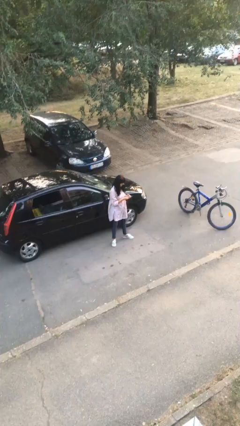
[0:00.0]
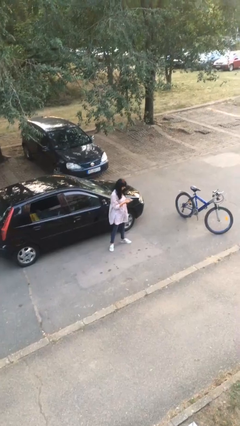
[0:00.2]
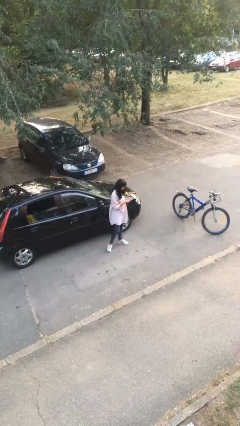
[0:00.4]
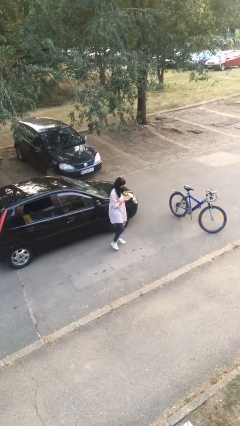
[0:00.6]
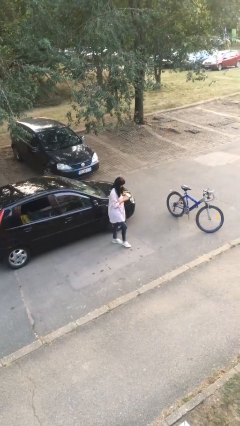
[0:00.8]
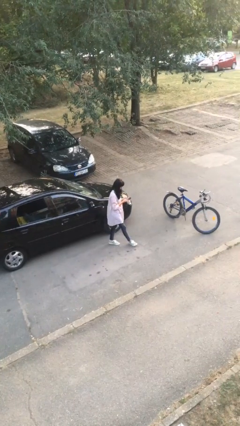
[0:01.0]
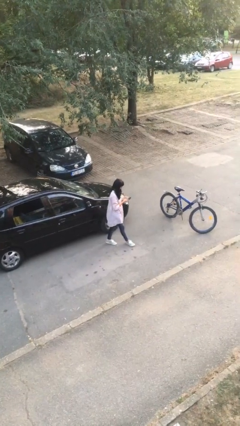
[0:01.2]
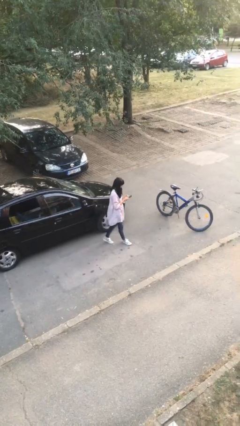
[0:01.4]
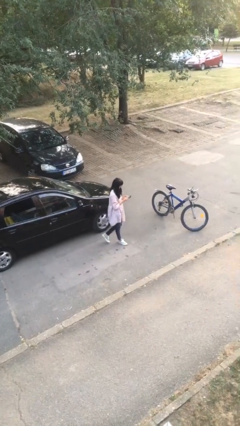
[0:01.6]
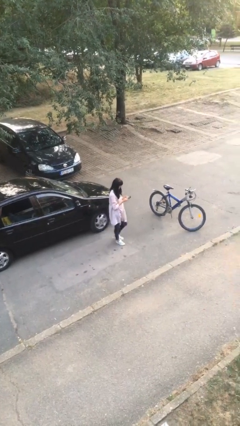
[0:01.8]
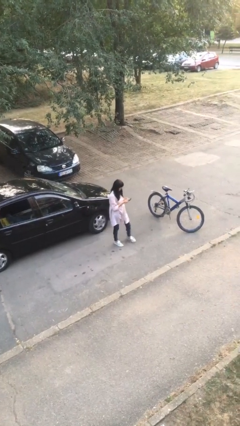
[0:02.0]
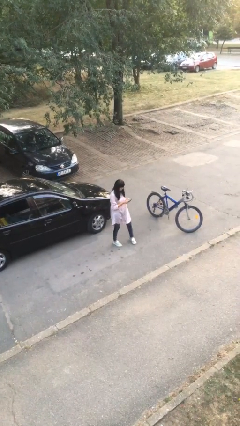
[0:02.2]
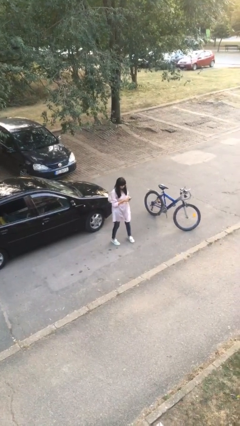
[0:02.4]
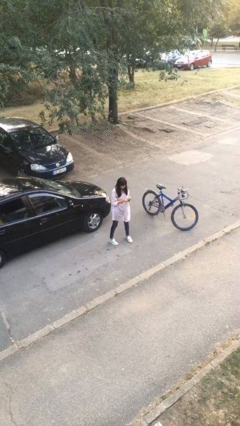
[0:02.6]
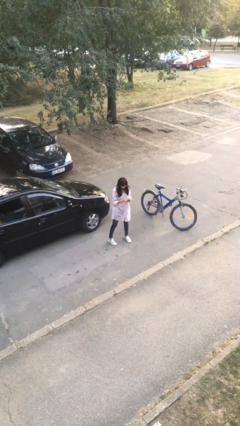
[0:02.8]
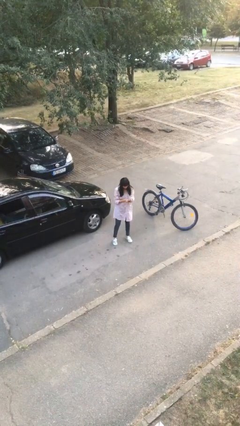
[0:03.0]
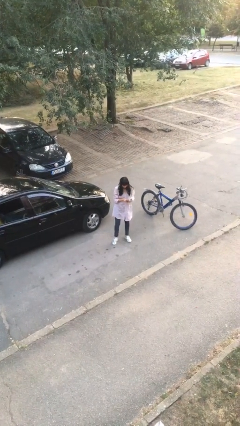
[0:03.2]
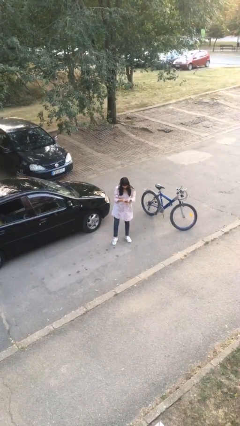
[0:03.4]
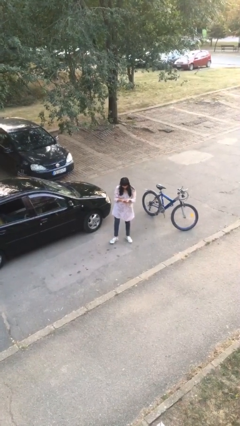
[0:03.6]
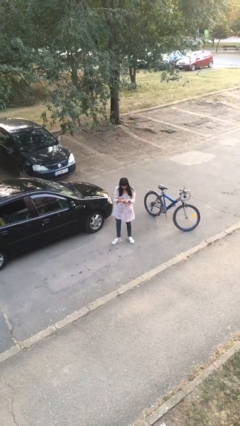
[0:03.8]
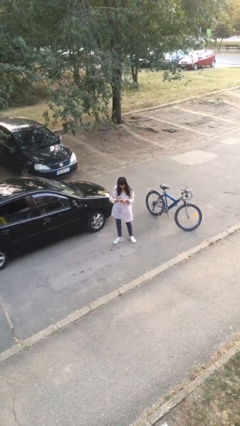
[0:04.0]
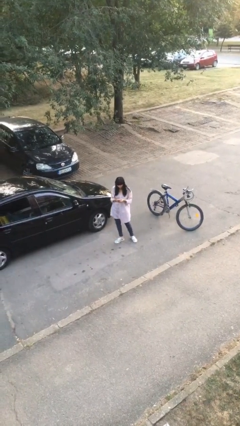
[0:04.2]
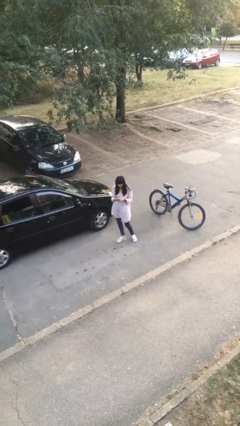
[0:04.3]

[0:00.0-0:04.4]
person texts on phone

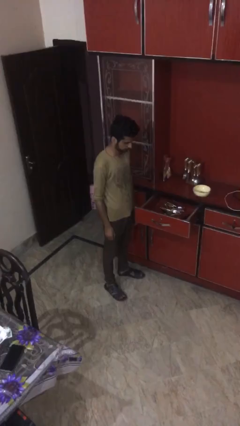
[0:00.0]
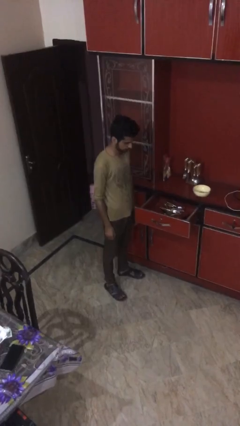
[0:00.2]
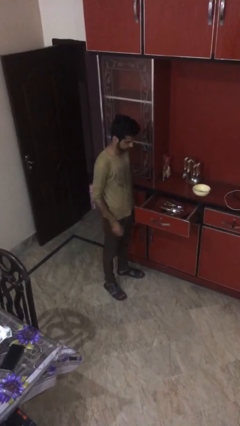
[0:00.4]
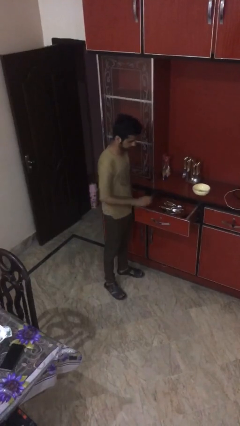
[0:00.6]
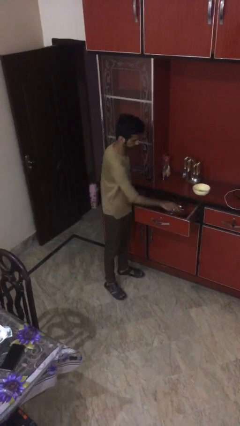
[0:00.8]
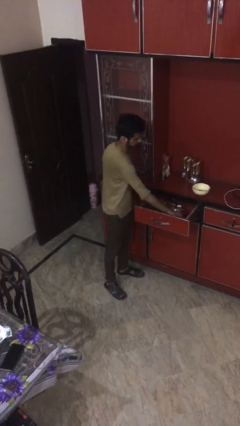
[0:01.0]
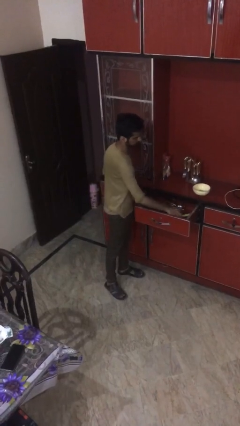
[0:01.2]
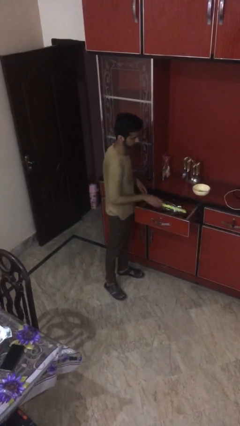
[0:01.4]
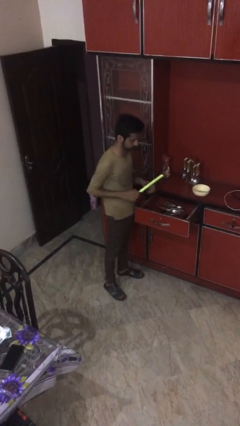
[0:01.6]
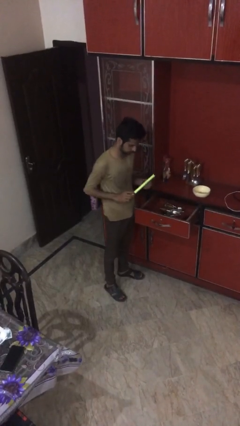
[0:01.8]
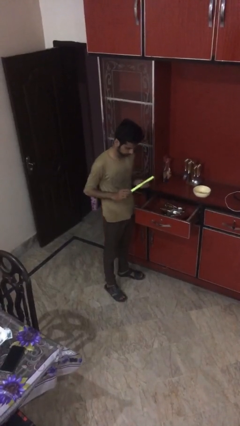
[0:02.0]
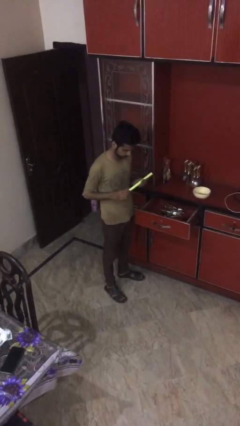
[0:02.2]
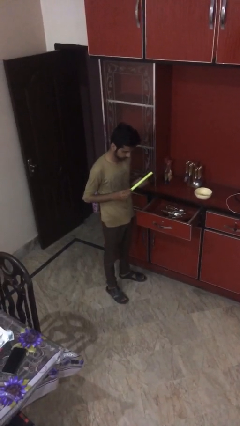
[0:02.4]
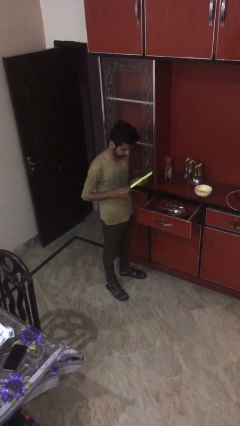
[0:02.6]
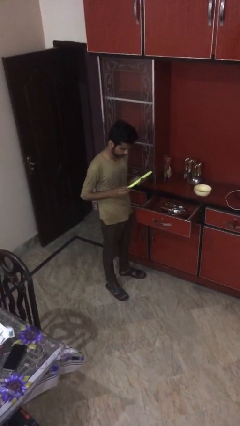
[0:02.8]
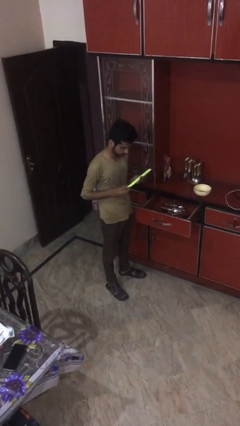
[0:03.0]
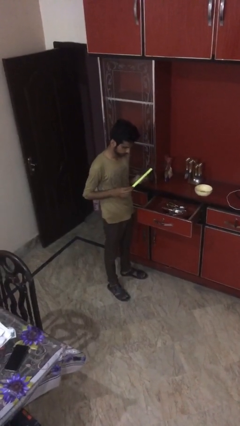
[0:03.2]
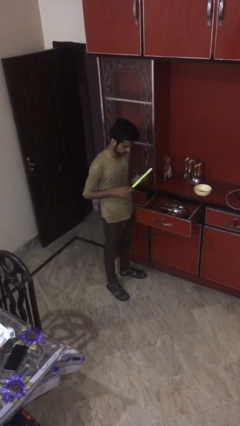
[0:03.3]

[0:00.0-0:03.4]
person takes object from kitchen drawer

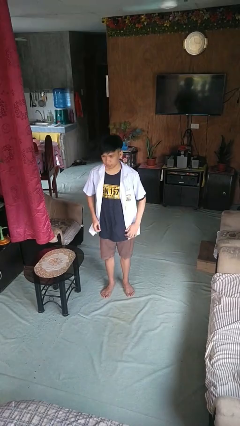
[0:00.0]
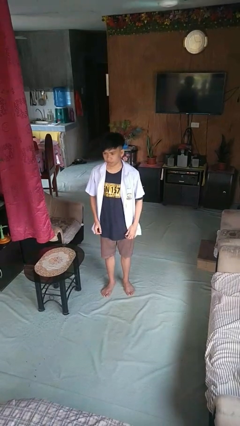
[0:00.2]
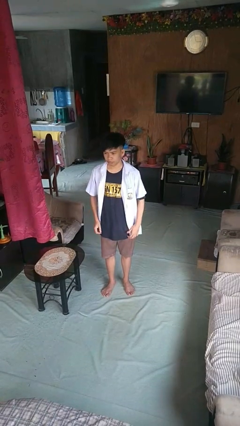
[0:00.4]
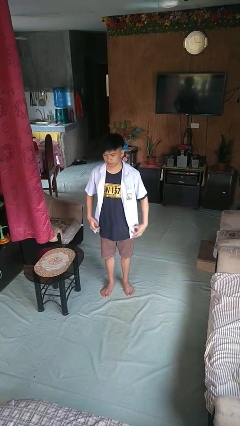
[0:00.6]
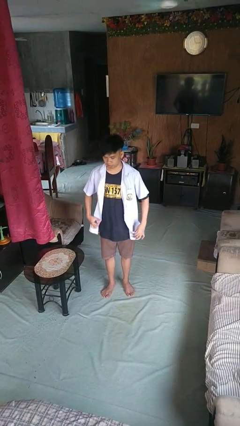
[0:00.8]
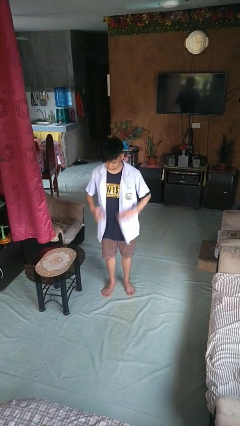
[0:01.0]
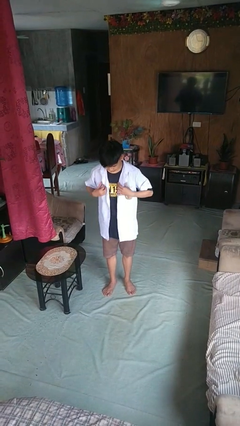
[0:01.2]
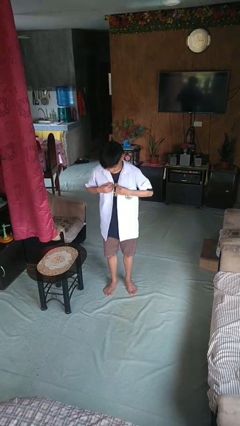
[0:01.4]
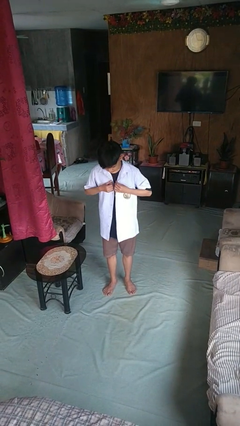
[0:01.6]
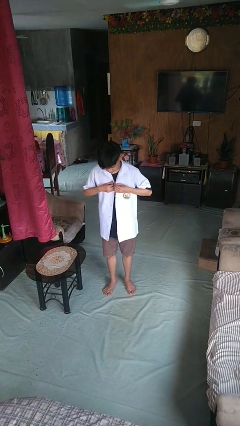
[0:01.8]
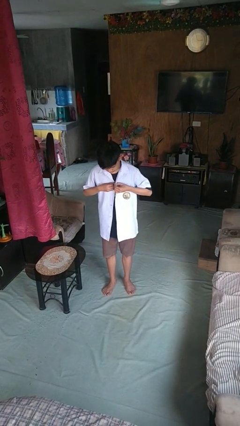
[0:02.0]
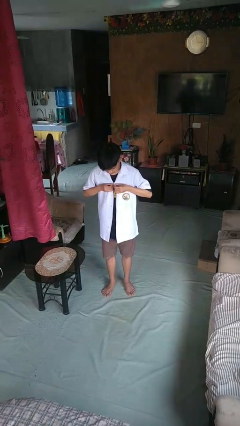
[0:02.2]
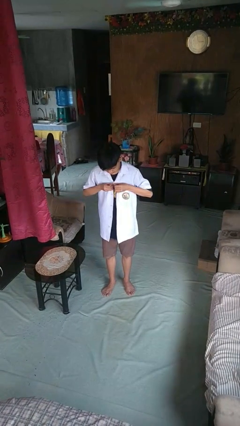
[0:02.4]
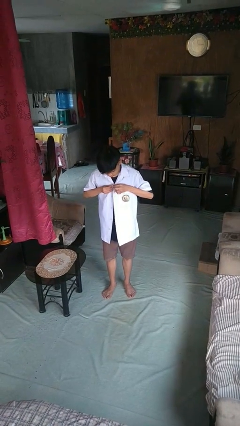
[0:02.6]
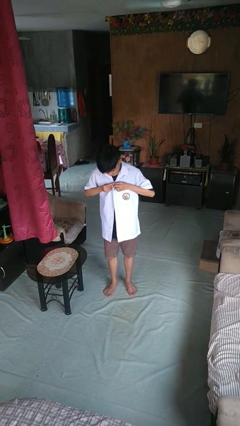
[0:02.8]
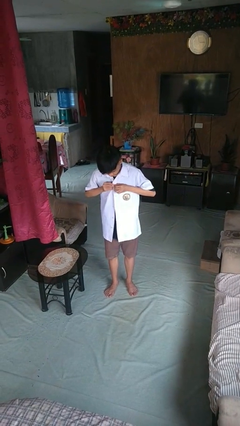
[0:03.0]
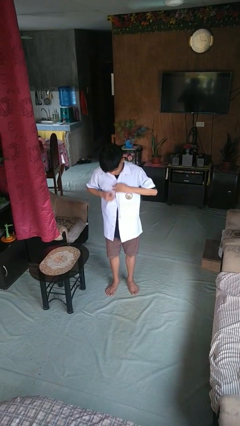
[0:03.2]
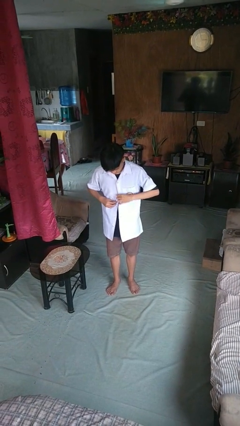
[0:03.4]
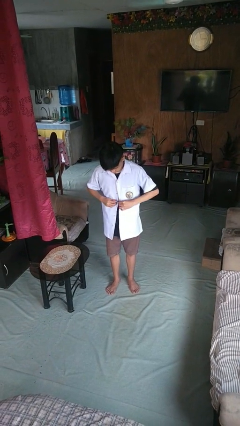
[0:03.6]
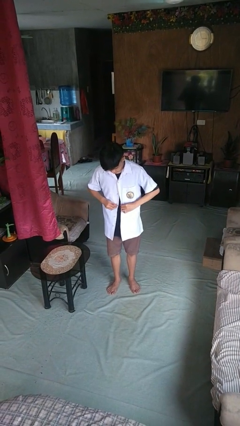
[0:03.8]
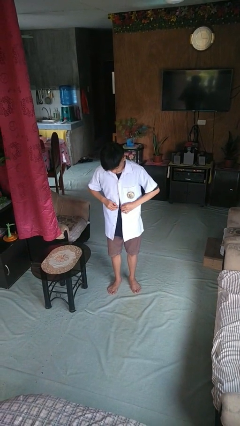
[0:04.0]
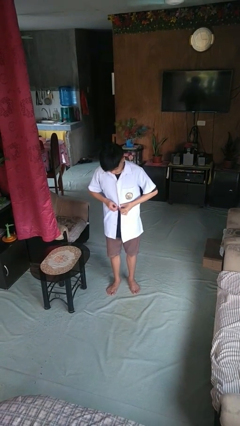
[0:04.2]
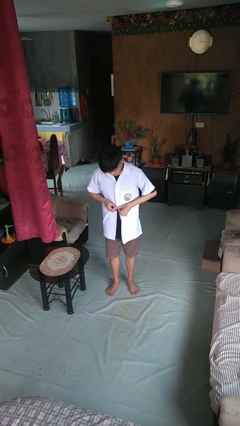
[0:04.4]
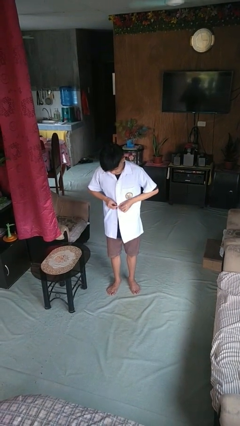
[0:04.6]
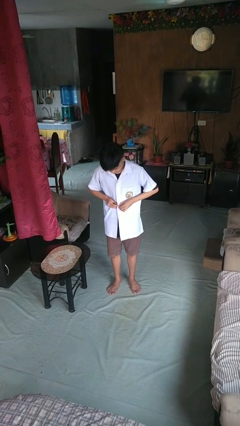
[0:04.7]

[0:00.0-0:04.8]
person buttons shirt

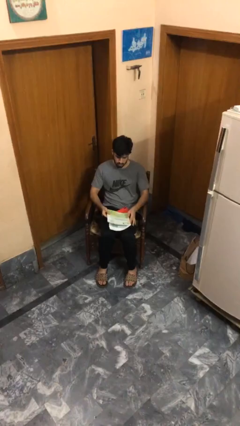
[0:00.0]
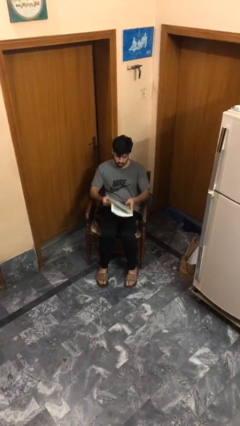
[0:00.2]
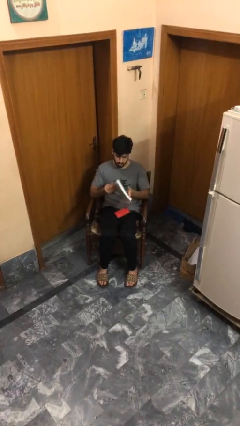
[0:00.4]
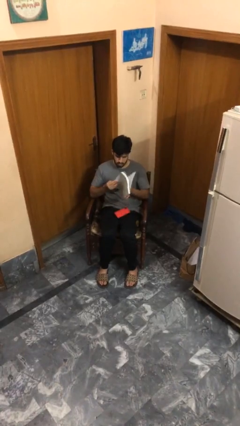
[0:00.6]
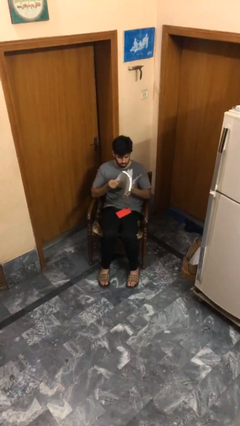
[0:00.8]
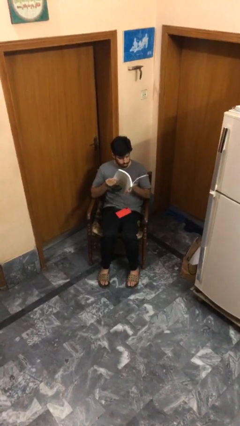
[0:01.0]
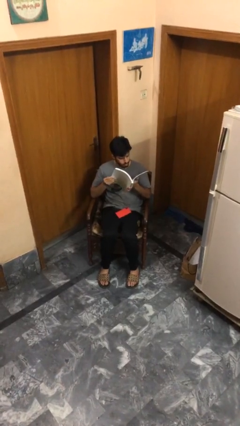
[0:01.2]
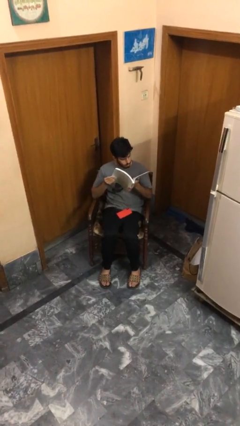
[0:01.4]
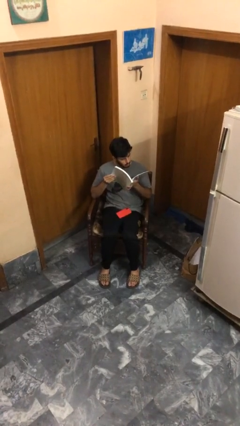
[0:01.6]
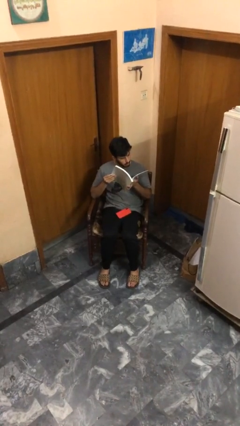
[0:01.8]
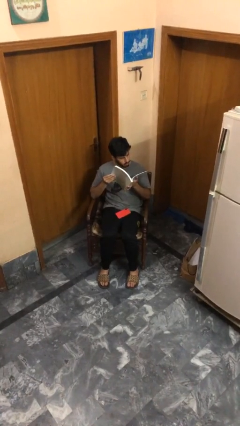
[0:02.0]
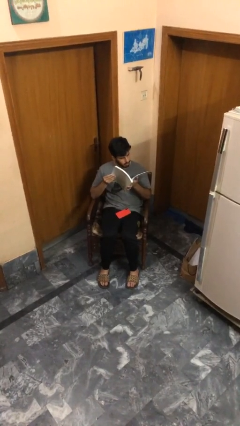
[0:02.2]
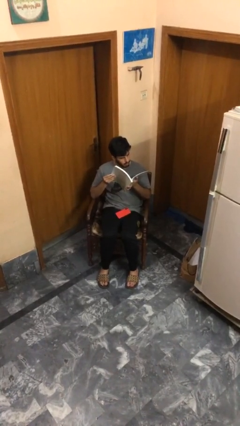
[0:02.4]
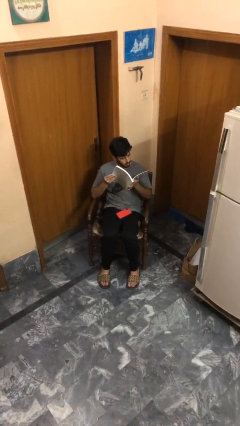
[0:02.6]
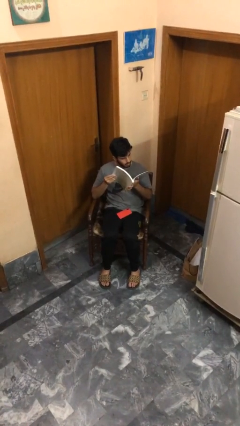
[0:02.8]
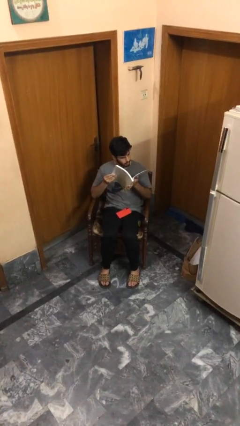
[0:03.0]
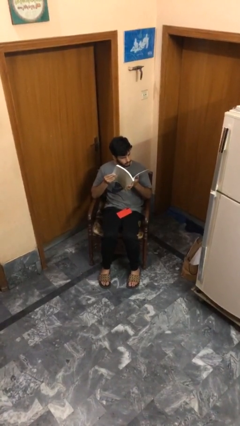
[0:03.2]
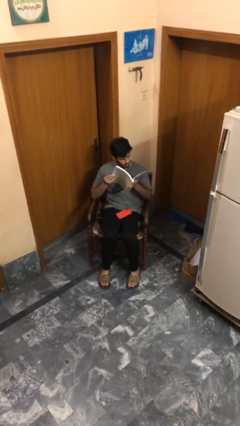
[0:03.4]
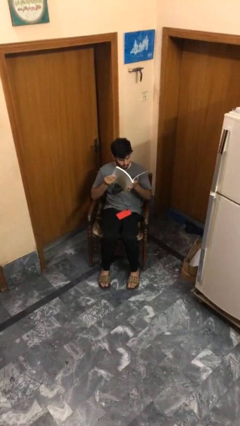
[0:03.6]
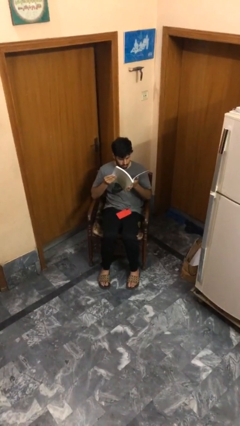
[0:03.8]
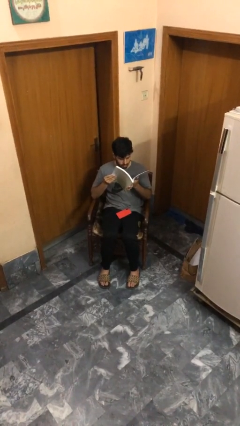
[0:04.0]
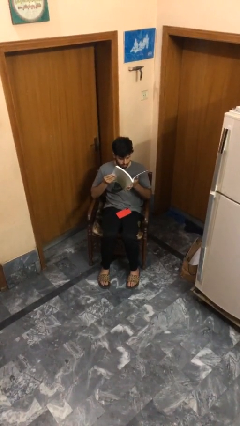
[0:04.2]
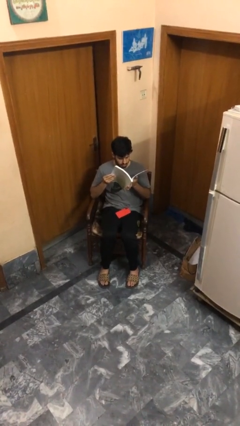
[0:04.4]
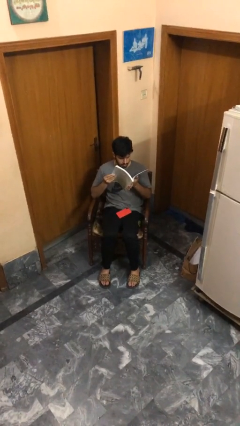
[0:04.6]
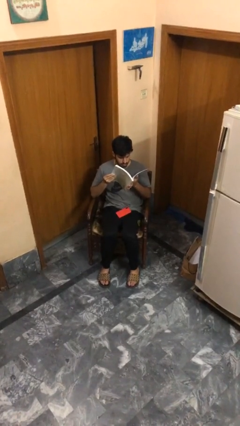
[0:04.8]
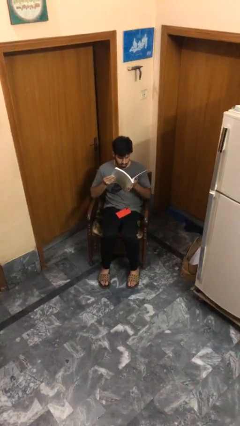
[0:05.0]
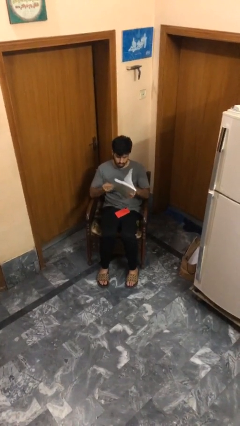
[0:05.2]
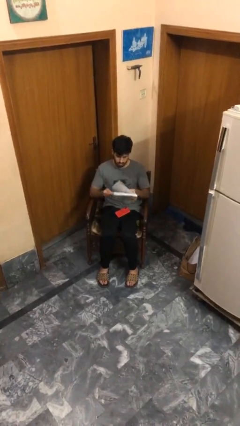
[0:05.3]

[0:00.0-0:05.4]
person reads book
